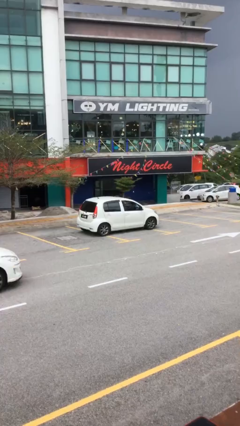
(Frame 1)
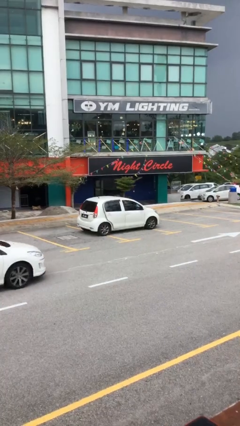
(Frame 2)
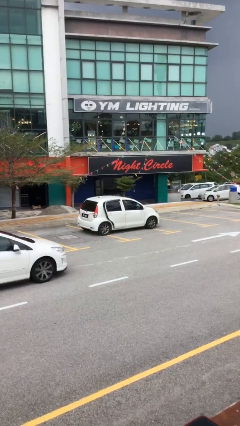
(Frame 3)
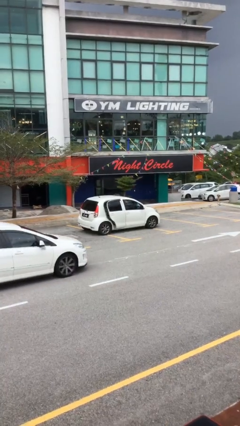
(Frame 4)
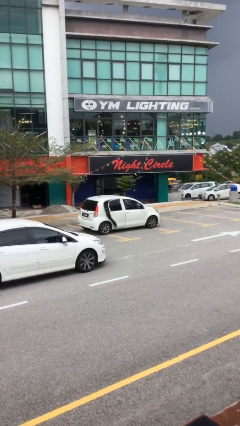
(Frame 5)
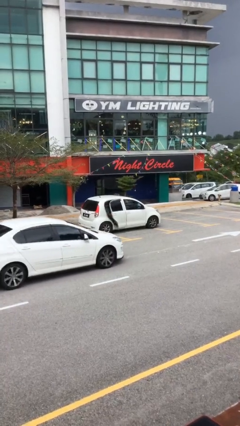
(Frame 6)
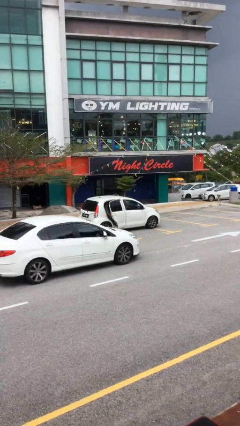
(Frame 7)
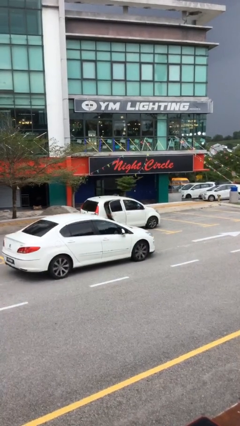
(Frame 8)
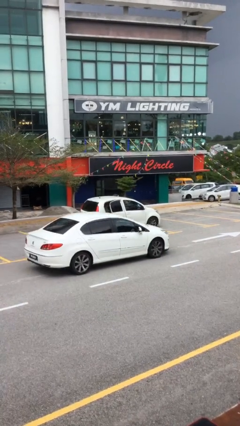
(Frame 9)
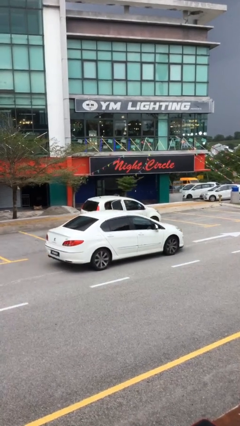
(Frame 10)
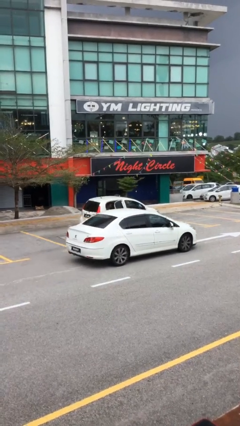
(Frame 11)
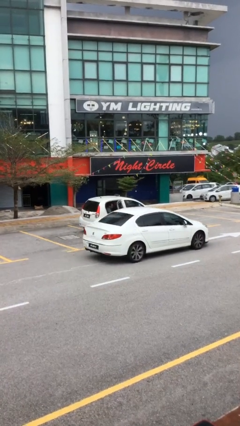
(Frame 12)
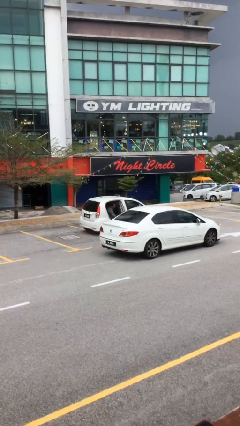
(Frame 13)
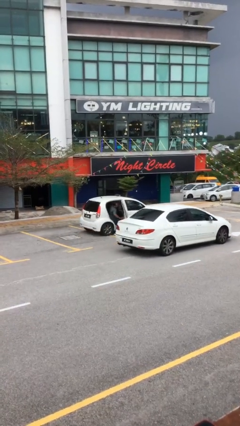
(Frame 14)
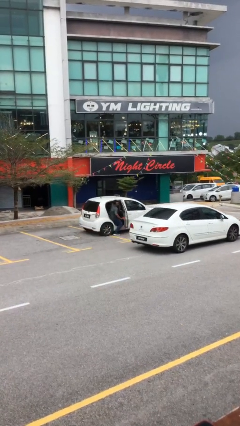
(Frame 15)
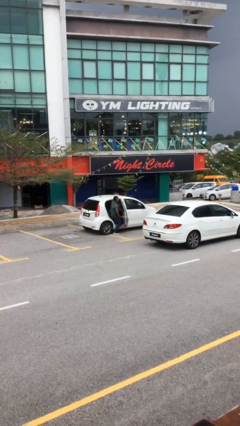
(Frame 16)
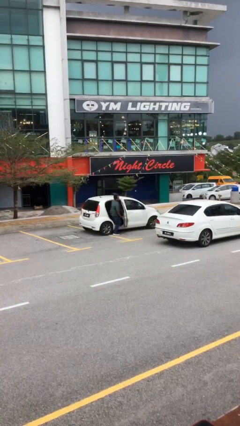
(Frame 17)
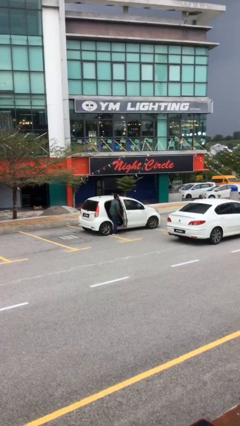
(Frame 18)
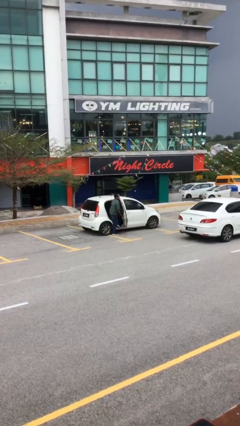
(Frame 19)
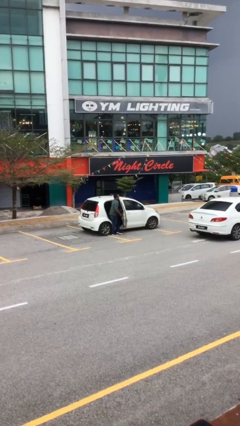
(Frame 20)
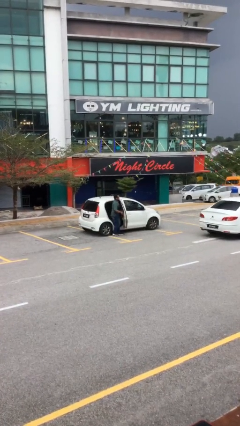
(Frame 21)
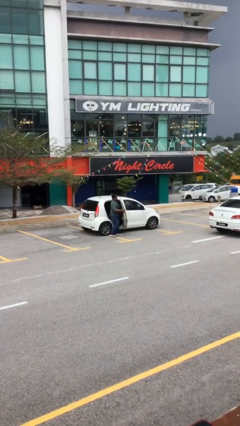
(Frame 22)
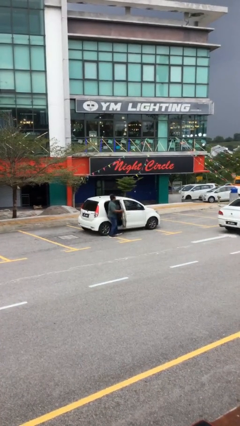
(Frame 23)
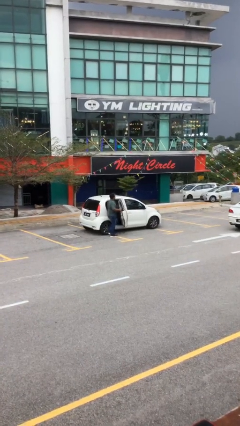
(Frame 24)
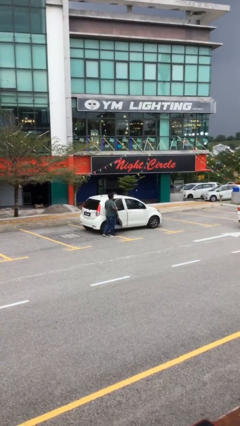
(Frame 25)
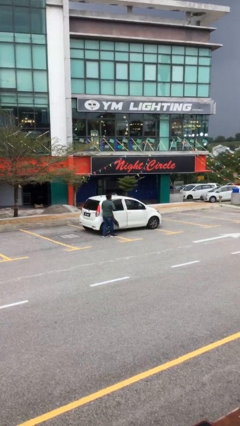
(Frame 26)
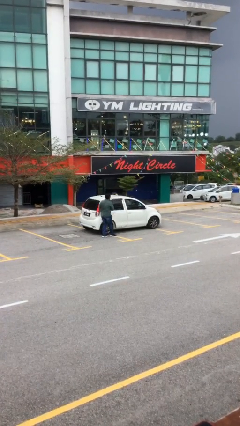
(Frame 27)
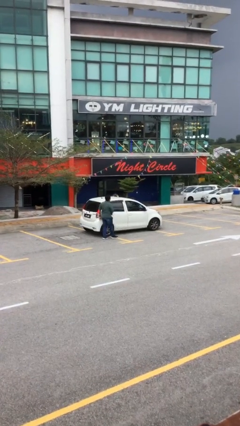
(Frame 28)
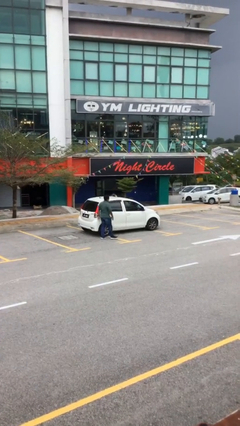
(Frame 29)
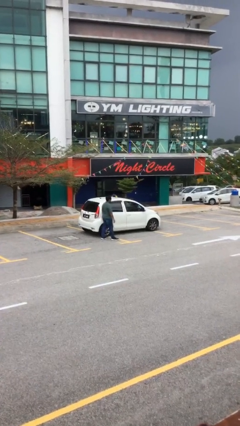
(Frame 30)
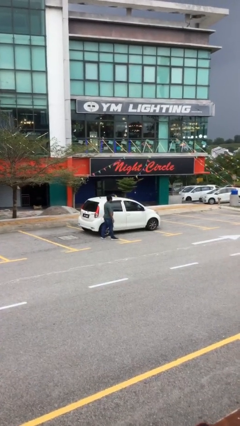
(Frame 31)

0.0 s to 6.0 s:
car drops off person

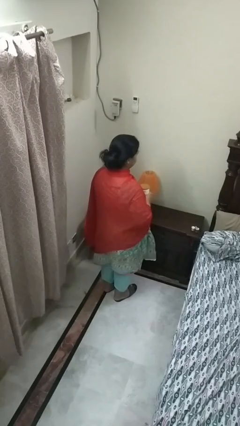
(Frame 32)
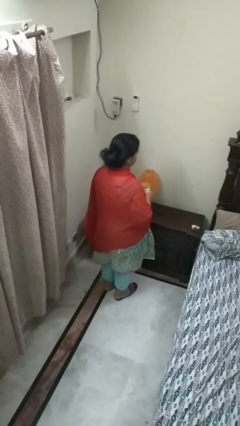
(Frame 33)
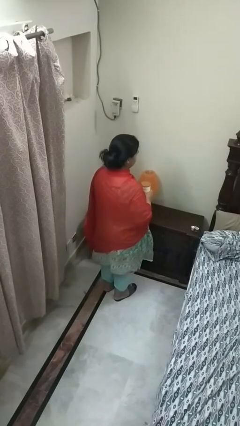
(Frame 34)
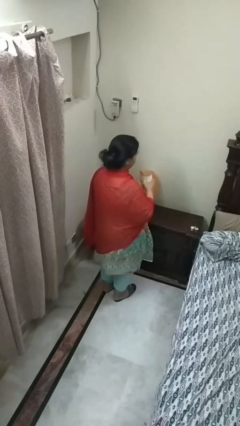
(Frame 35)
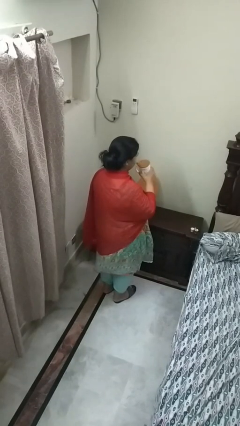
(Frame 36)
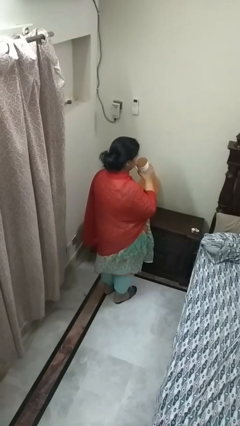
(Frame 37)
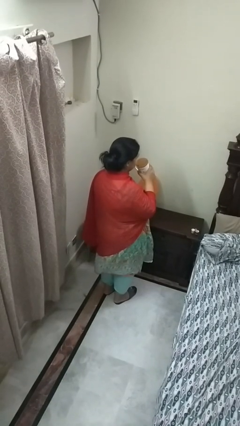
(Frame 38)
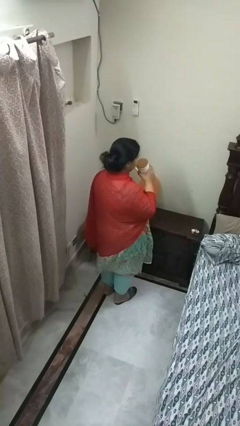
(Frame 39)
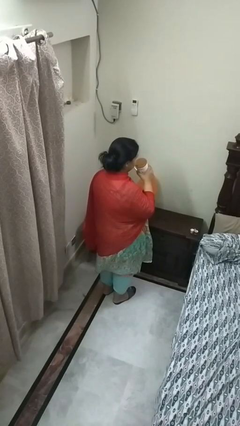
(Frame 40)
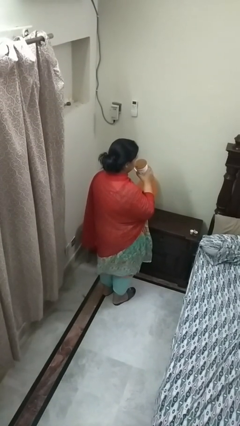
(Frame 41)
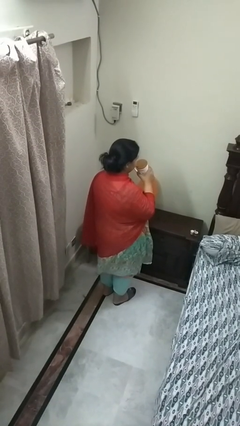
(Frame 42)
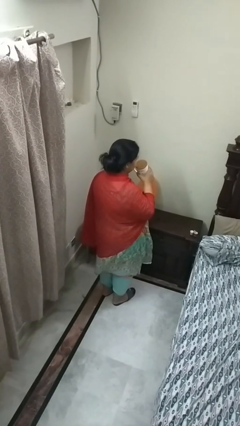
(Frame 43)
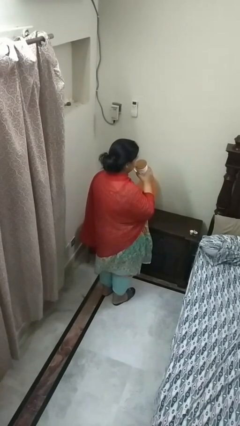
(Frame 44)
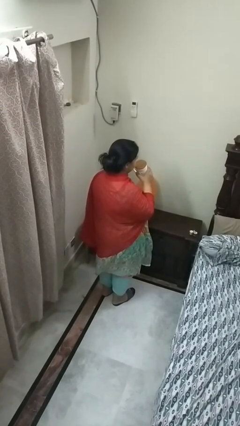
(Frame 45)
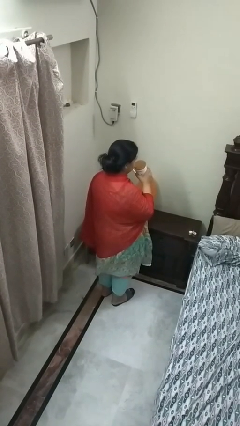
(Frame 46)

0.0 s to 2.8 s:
person drinks from straw

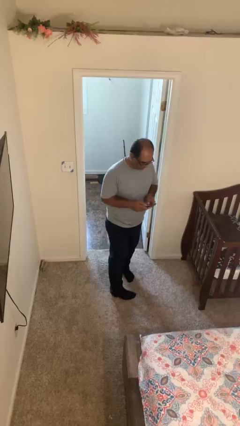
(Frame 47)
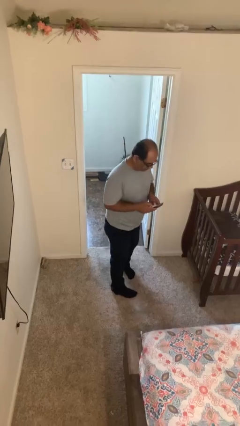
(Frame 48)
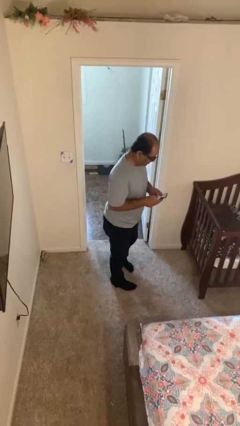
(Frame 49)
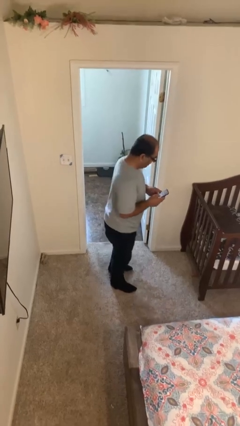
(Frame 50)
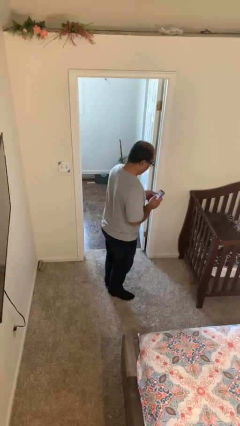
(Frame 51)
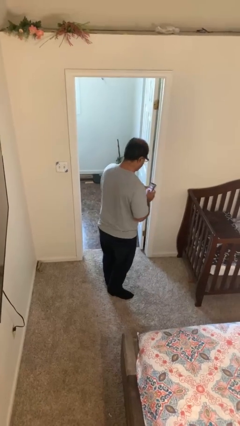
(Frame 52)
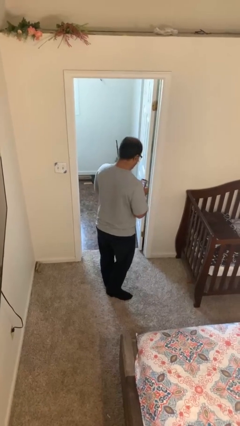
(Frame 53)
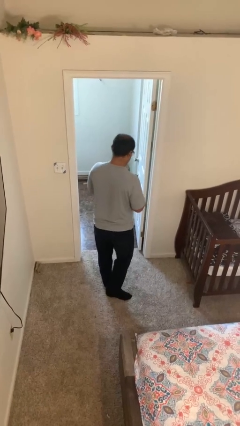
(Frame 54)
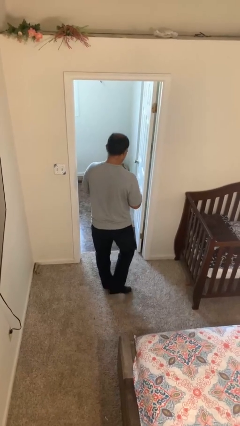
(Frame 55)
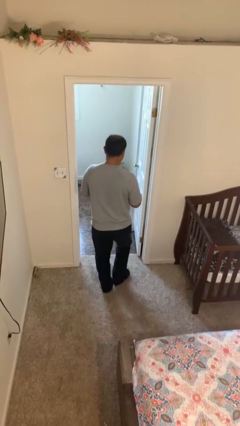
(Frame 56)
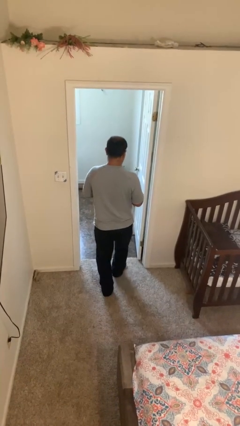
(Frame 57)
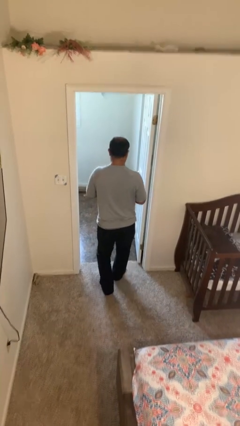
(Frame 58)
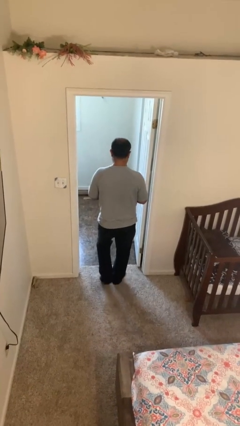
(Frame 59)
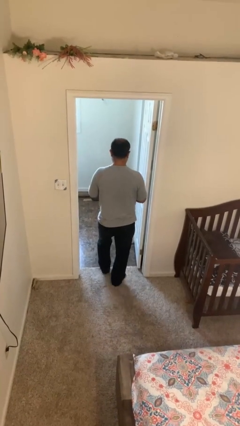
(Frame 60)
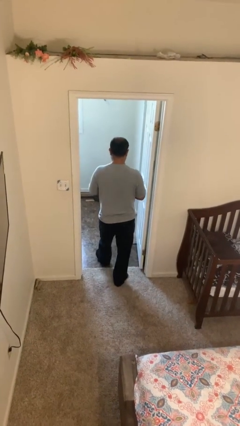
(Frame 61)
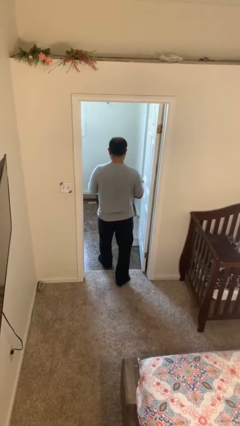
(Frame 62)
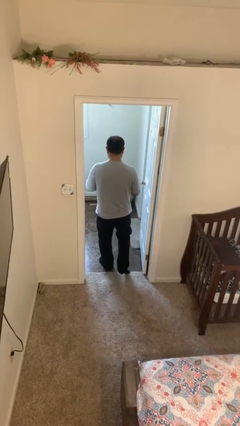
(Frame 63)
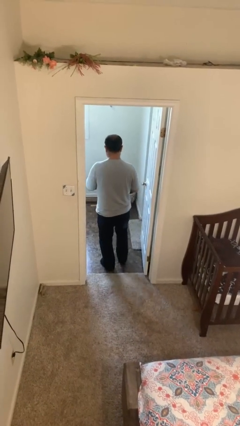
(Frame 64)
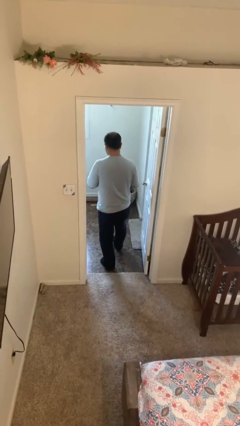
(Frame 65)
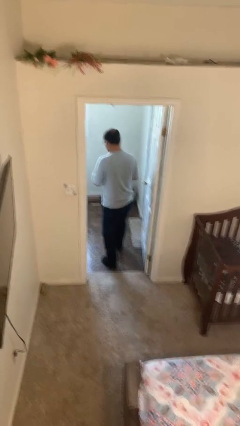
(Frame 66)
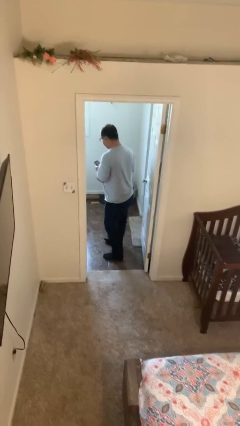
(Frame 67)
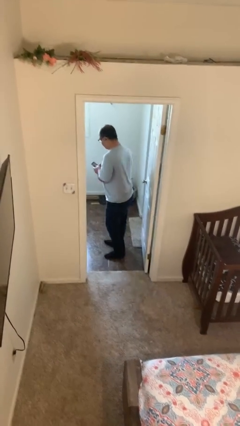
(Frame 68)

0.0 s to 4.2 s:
person exits scene through structure

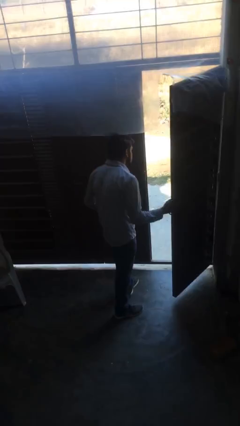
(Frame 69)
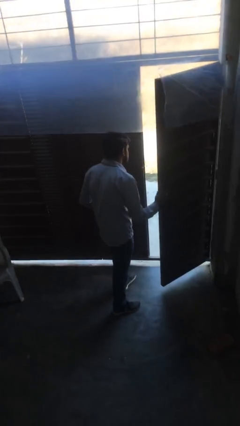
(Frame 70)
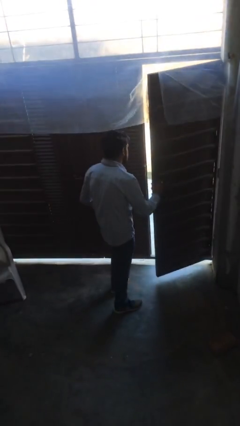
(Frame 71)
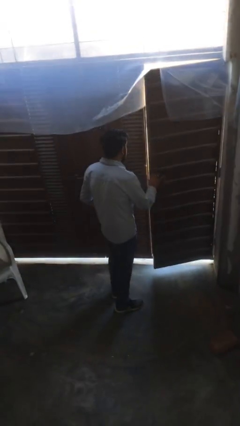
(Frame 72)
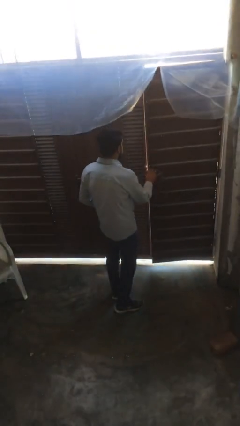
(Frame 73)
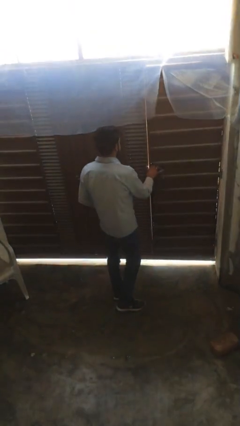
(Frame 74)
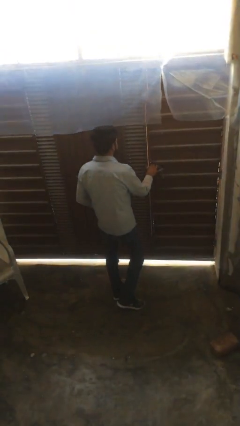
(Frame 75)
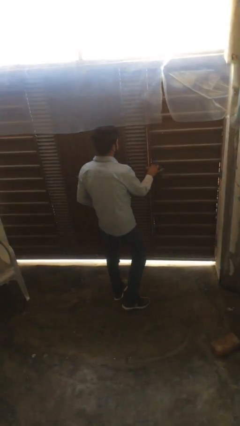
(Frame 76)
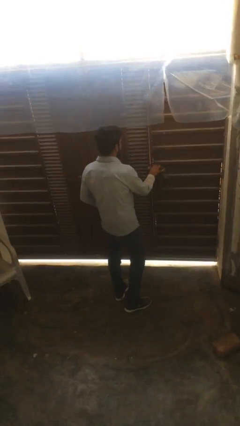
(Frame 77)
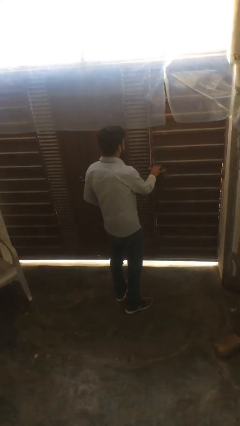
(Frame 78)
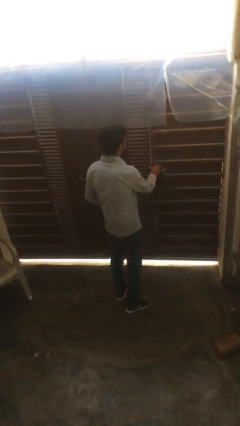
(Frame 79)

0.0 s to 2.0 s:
person closes facility door

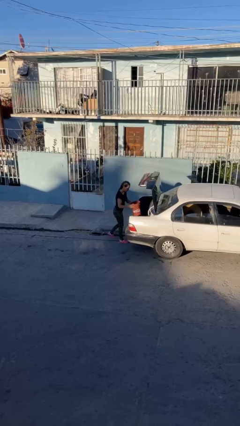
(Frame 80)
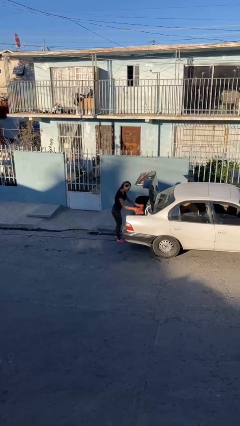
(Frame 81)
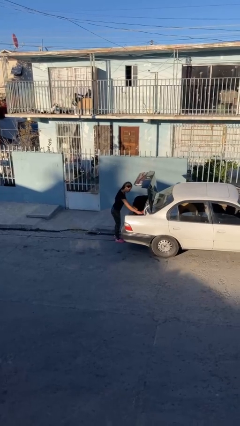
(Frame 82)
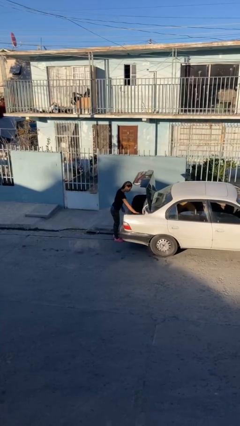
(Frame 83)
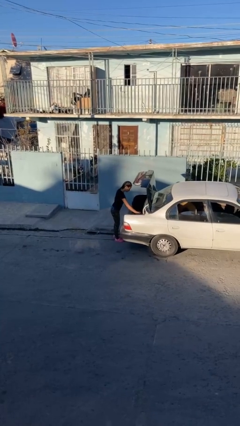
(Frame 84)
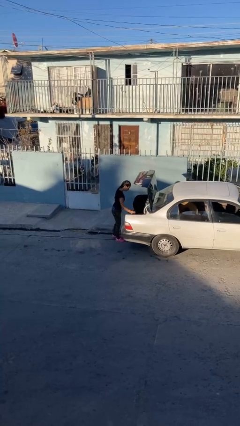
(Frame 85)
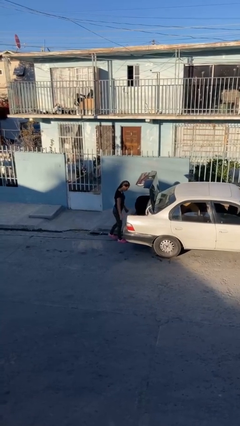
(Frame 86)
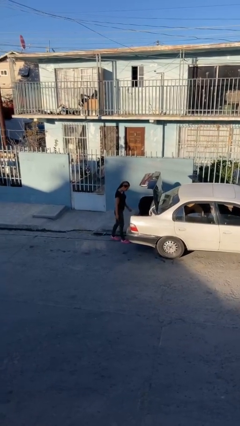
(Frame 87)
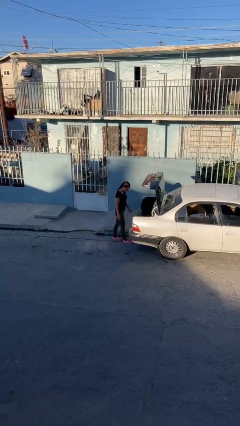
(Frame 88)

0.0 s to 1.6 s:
person loads car

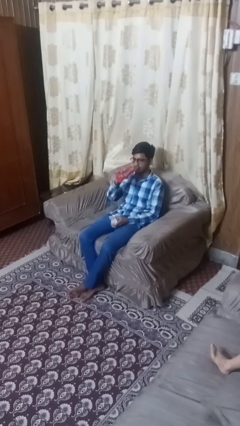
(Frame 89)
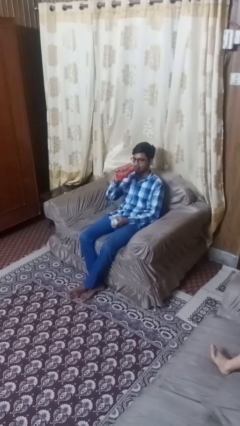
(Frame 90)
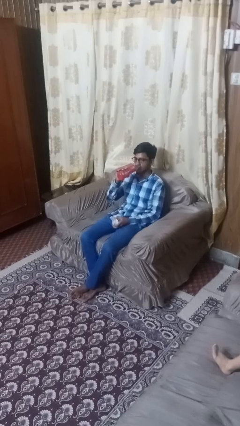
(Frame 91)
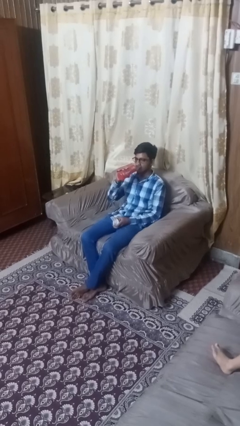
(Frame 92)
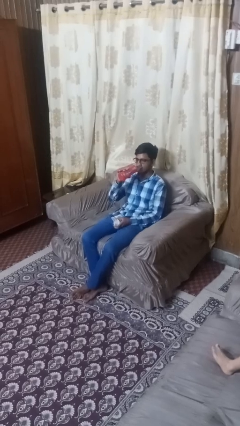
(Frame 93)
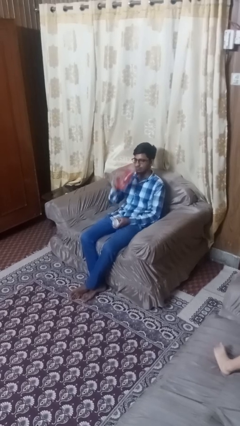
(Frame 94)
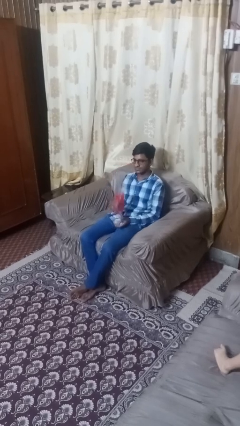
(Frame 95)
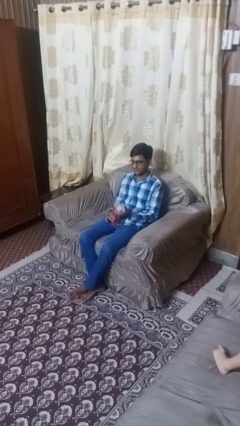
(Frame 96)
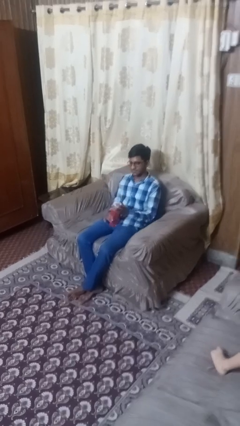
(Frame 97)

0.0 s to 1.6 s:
person drinks from bottle
